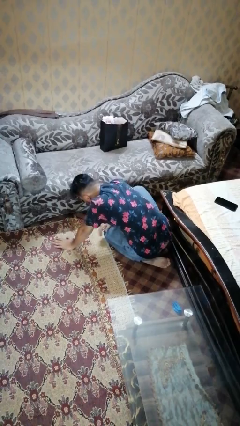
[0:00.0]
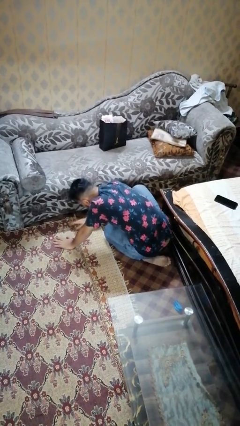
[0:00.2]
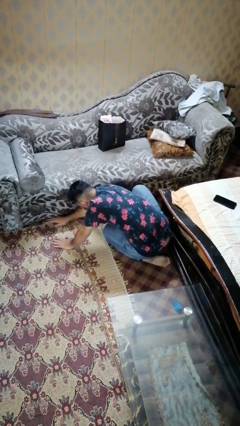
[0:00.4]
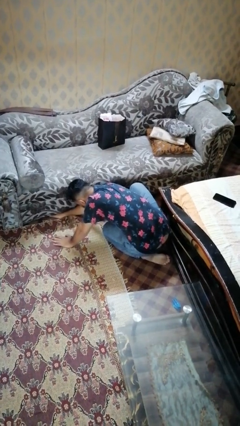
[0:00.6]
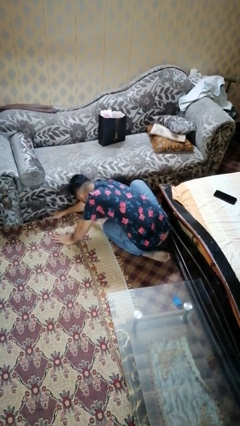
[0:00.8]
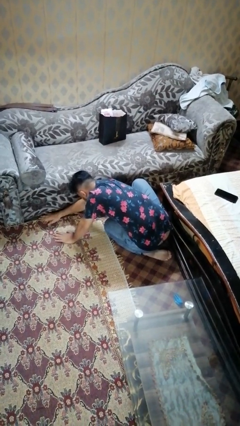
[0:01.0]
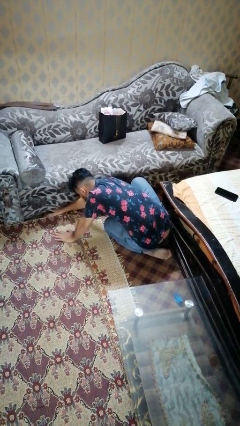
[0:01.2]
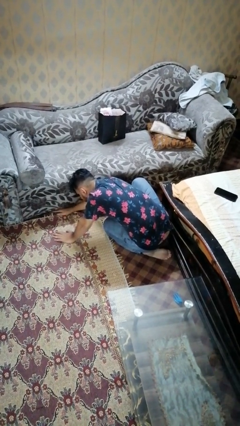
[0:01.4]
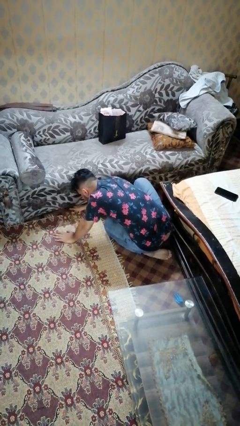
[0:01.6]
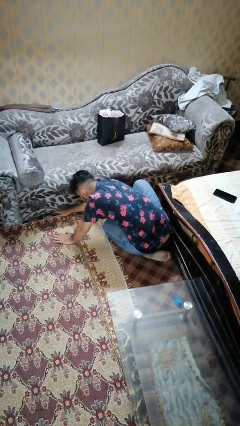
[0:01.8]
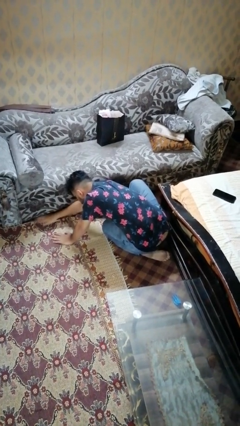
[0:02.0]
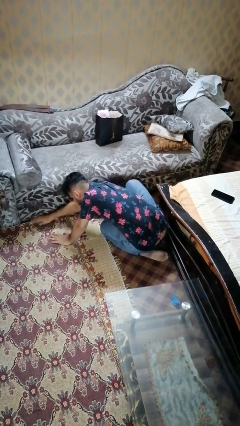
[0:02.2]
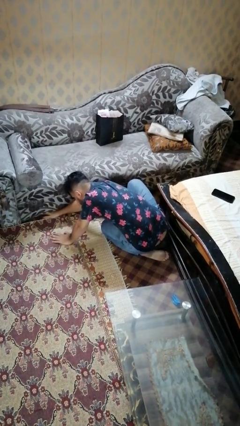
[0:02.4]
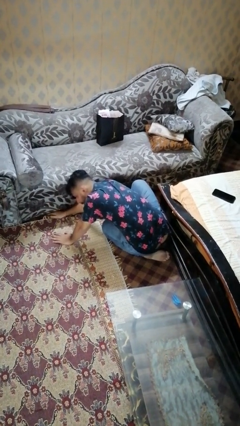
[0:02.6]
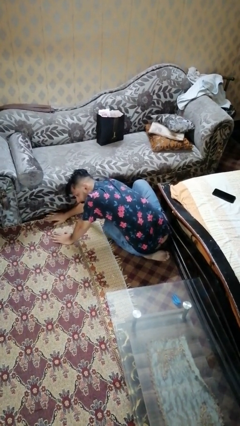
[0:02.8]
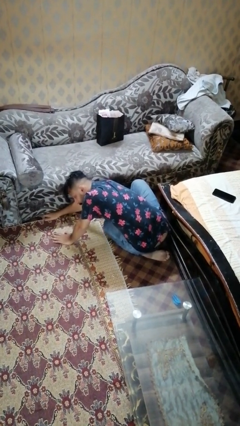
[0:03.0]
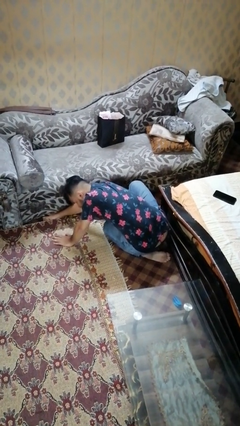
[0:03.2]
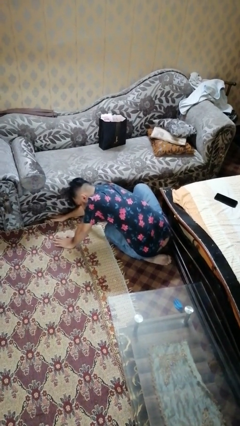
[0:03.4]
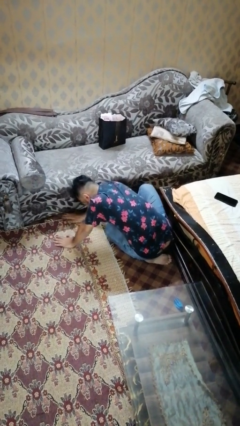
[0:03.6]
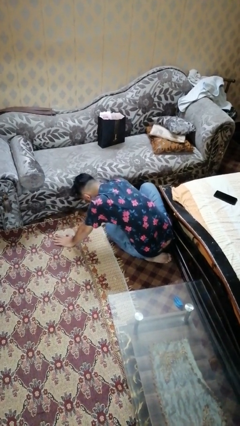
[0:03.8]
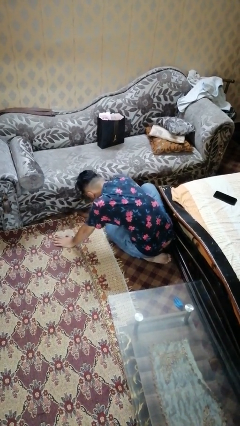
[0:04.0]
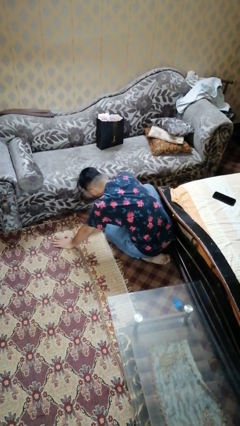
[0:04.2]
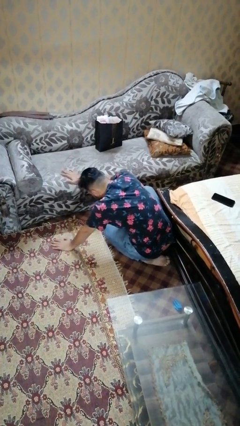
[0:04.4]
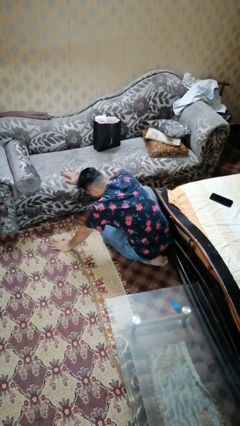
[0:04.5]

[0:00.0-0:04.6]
person searches under couch

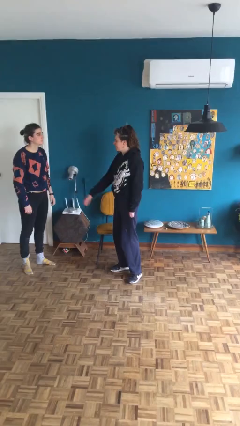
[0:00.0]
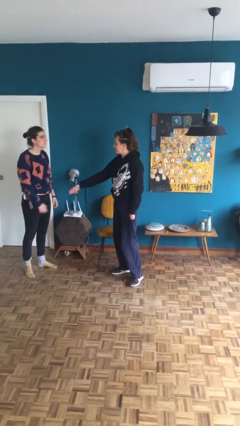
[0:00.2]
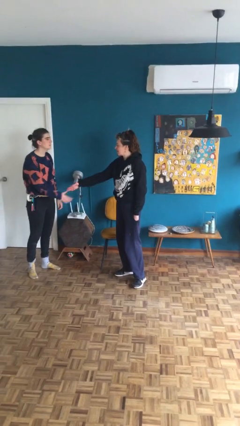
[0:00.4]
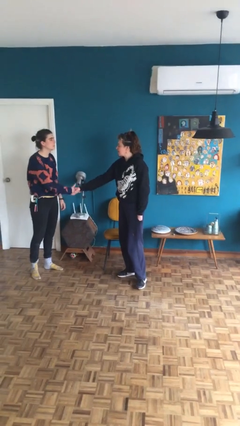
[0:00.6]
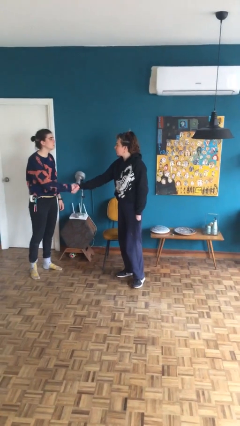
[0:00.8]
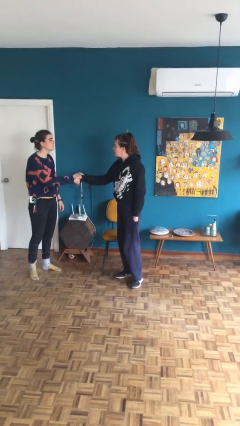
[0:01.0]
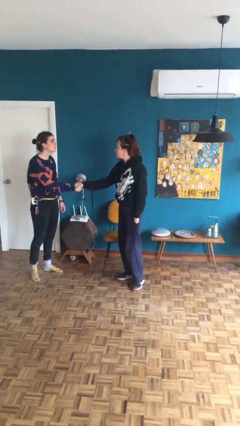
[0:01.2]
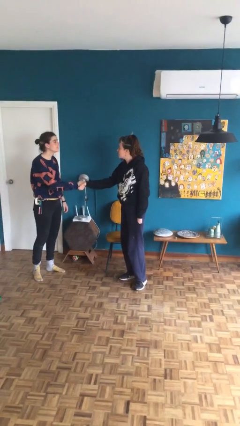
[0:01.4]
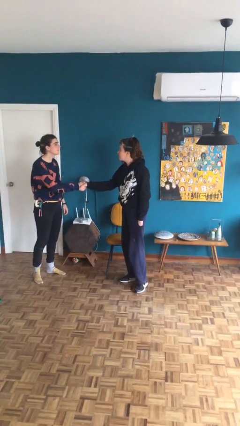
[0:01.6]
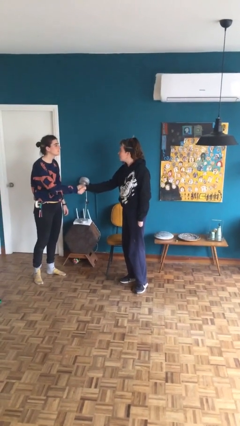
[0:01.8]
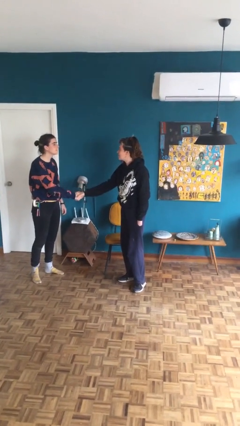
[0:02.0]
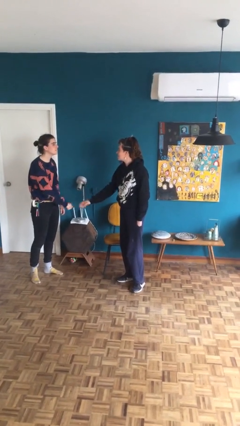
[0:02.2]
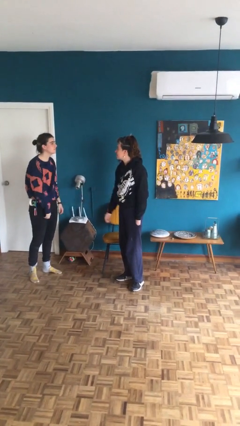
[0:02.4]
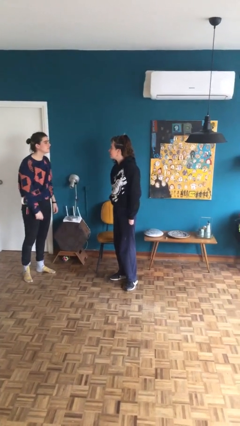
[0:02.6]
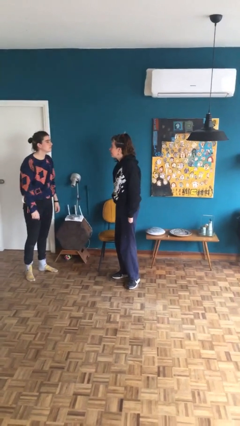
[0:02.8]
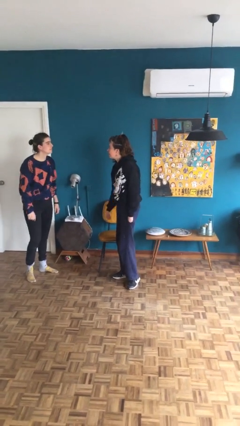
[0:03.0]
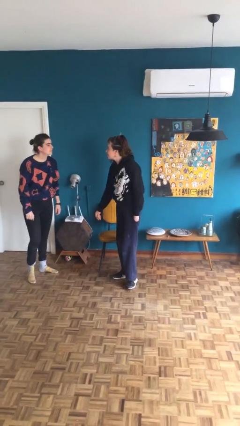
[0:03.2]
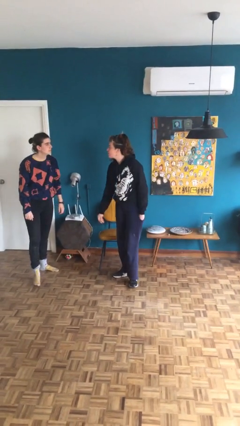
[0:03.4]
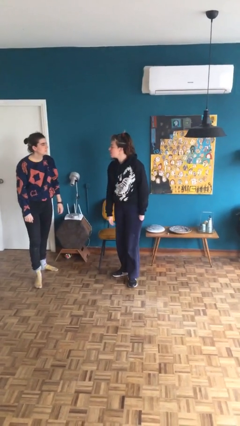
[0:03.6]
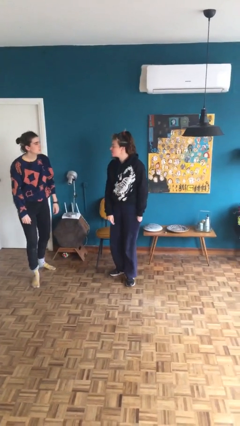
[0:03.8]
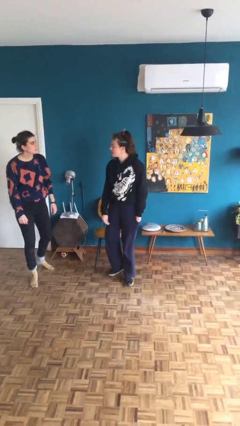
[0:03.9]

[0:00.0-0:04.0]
person shakes hand

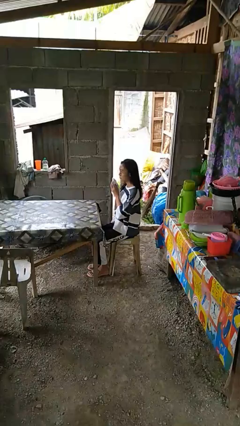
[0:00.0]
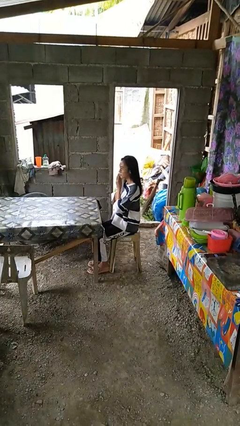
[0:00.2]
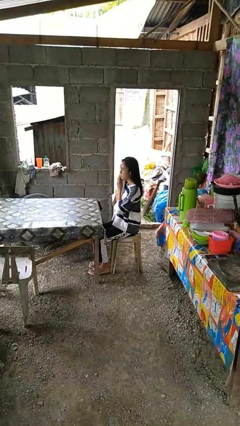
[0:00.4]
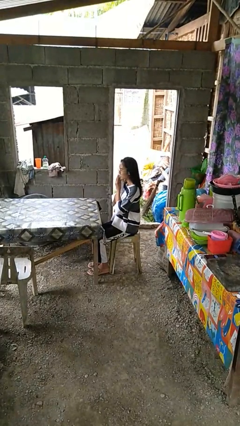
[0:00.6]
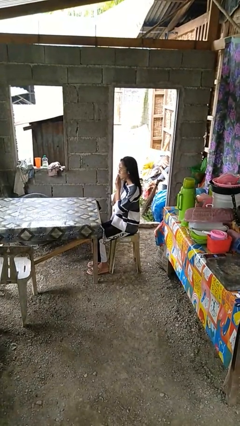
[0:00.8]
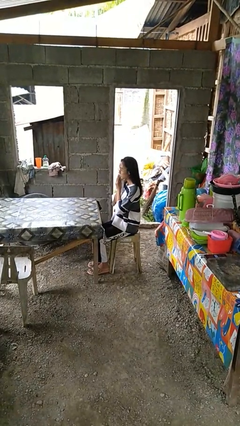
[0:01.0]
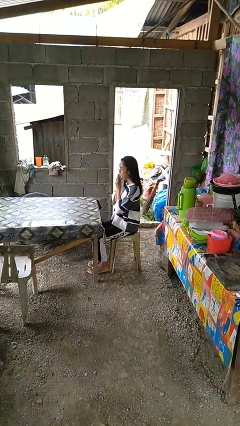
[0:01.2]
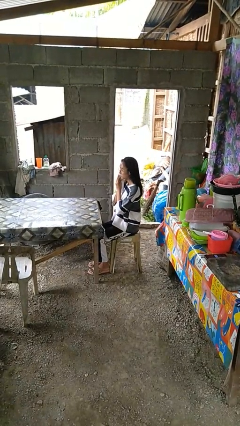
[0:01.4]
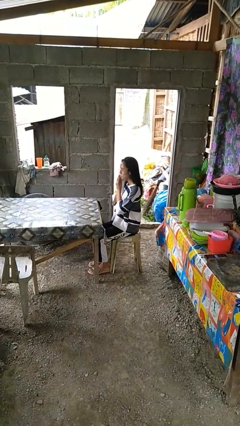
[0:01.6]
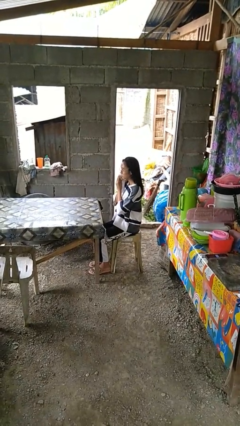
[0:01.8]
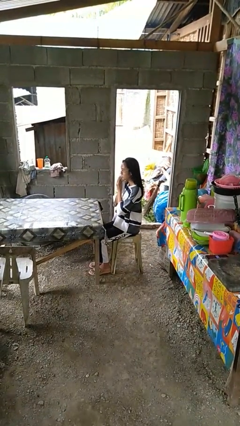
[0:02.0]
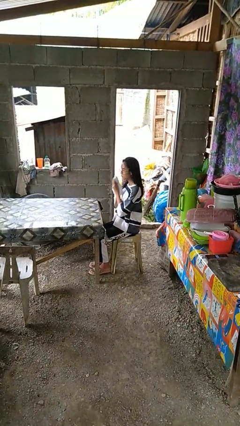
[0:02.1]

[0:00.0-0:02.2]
person wipes mouth with napkin

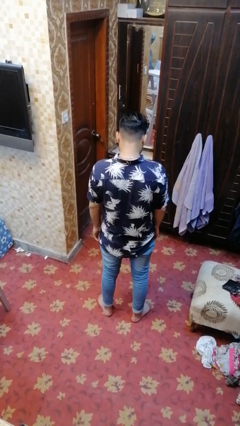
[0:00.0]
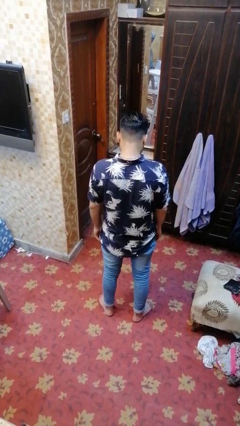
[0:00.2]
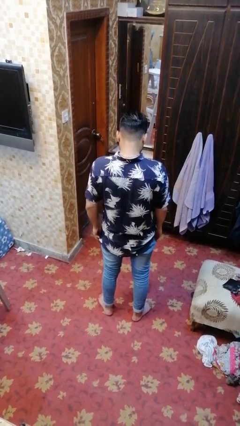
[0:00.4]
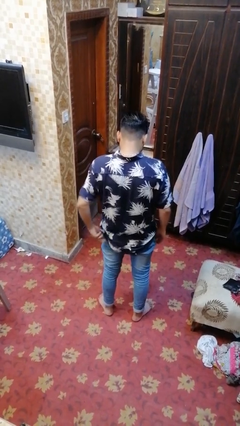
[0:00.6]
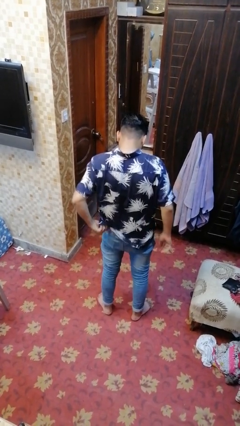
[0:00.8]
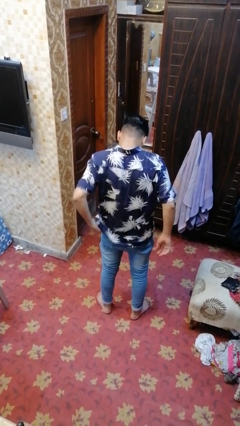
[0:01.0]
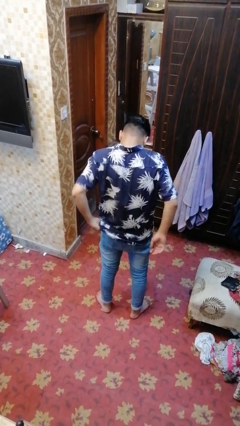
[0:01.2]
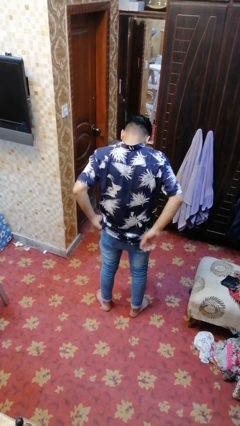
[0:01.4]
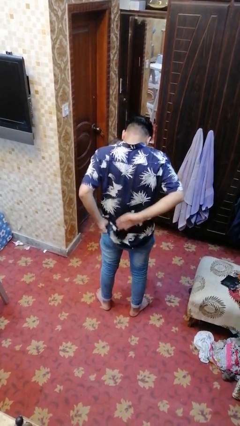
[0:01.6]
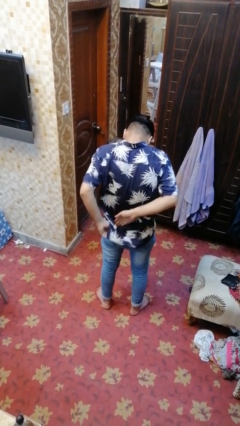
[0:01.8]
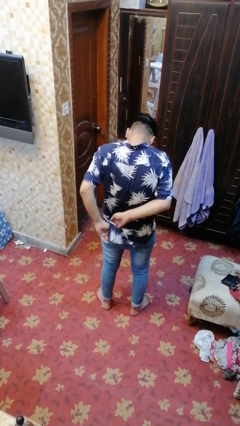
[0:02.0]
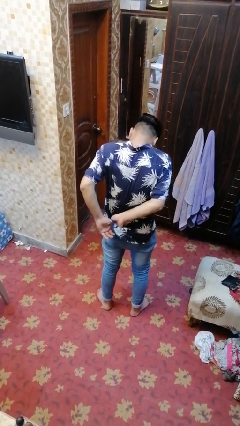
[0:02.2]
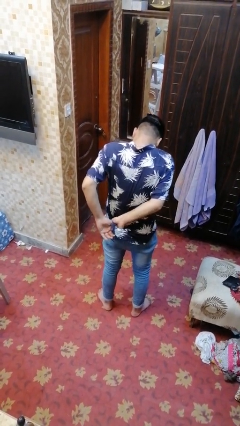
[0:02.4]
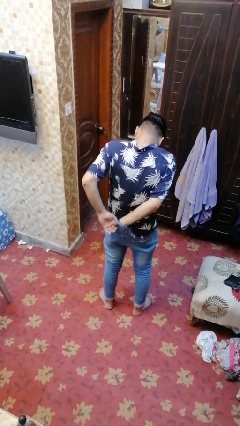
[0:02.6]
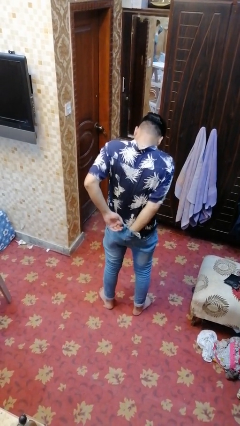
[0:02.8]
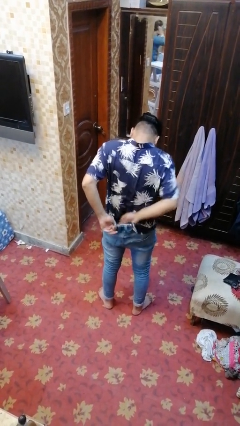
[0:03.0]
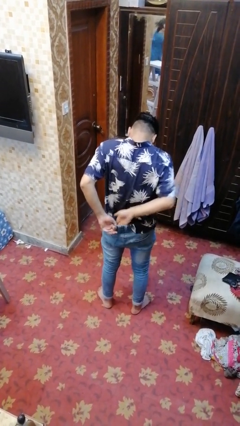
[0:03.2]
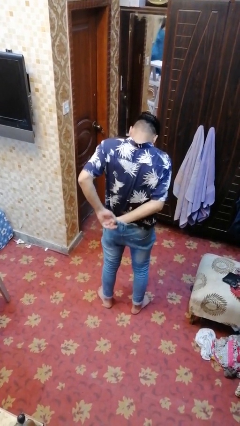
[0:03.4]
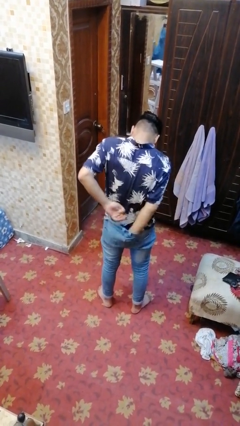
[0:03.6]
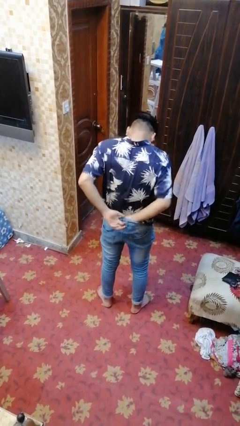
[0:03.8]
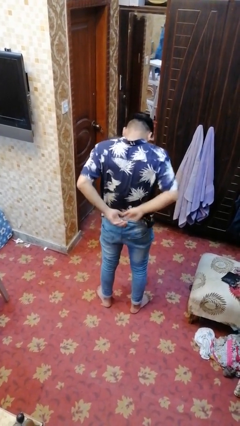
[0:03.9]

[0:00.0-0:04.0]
person tucks in shirt

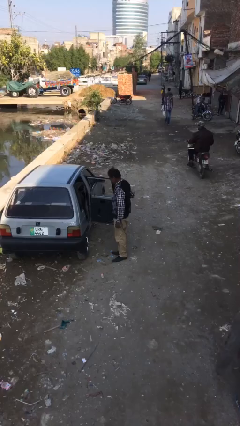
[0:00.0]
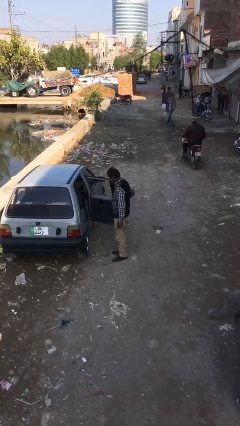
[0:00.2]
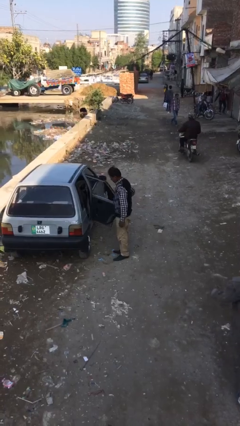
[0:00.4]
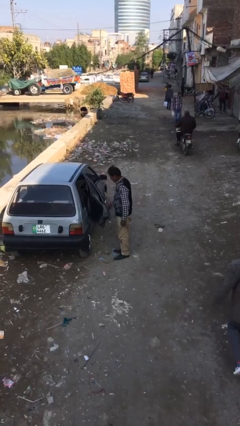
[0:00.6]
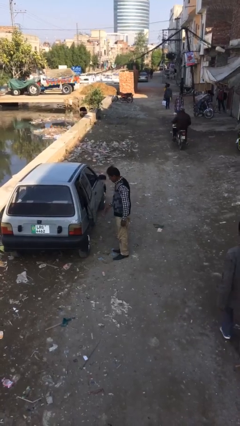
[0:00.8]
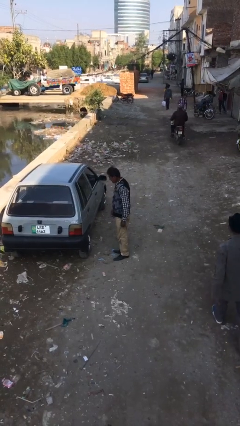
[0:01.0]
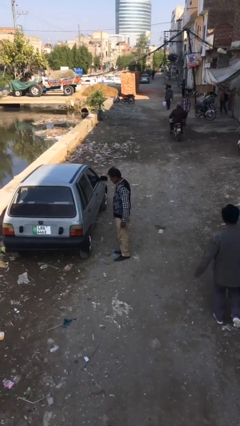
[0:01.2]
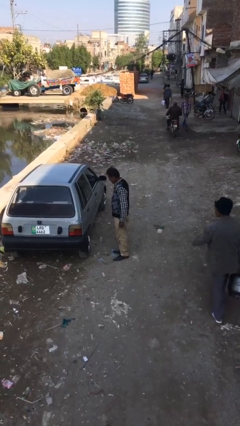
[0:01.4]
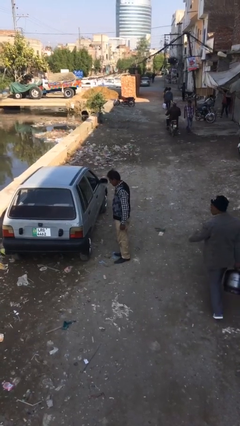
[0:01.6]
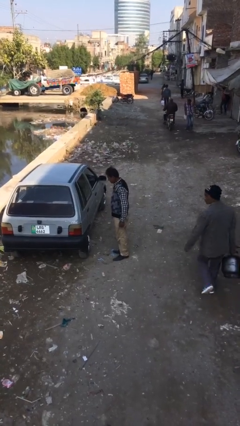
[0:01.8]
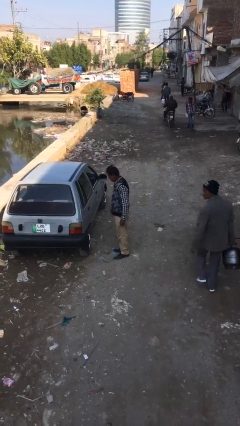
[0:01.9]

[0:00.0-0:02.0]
person closes car door

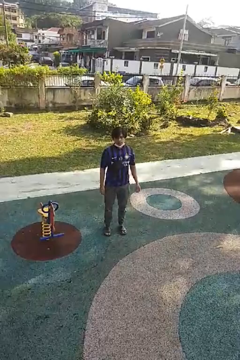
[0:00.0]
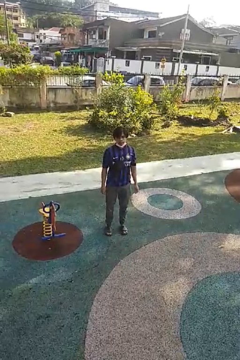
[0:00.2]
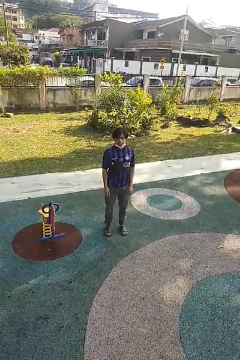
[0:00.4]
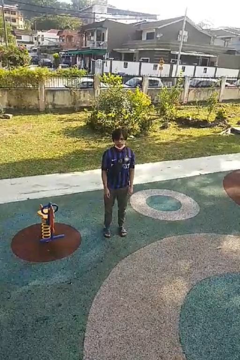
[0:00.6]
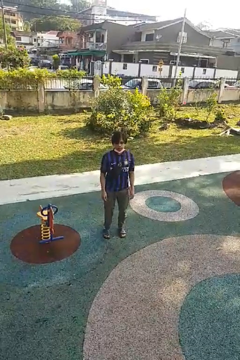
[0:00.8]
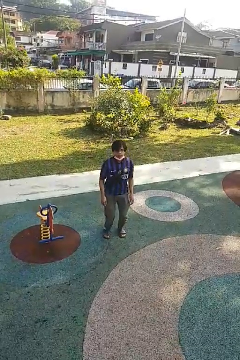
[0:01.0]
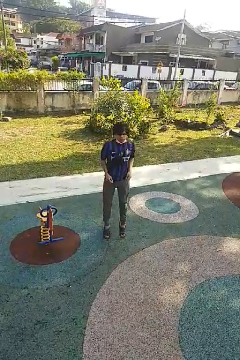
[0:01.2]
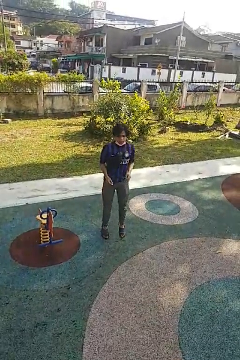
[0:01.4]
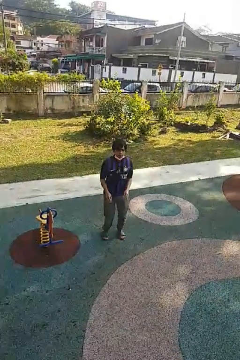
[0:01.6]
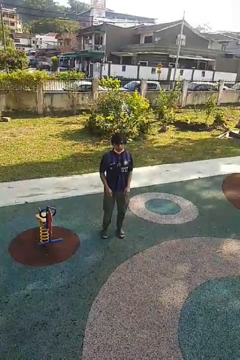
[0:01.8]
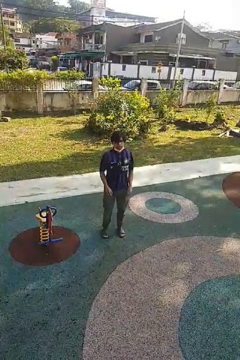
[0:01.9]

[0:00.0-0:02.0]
person jumps
